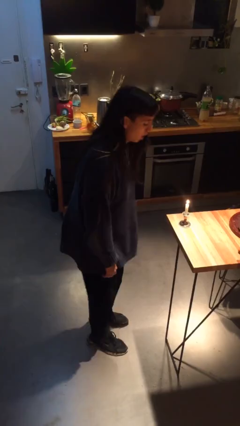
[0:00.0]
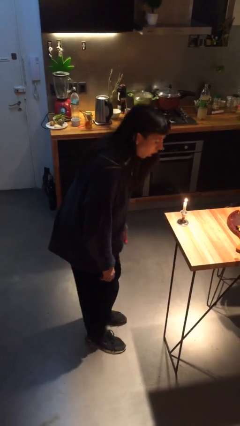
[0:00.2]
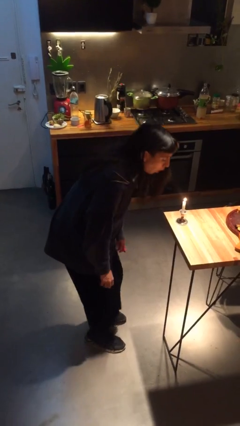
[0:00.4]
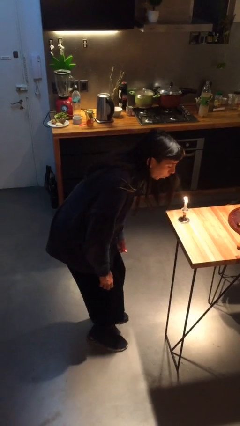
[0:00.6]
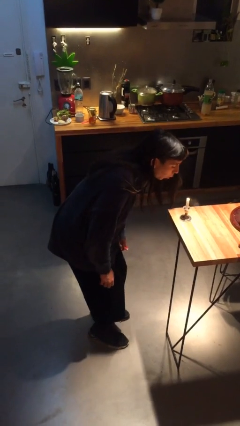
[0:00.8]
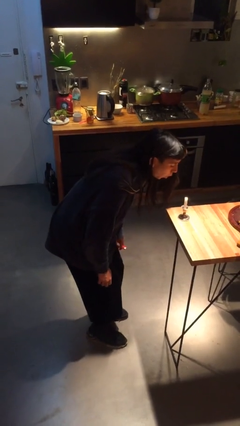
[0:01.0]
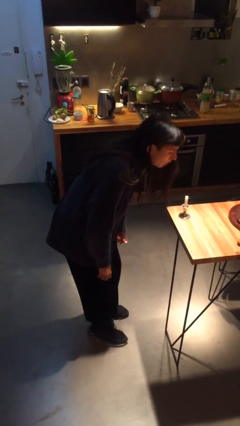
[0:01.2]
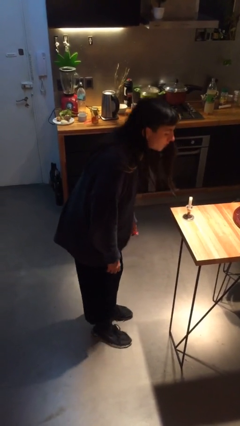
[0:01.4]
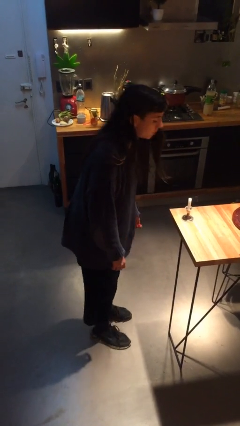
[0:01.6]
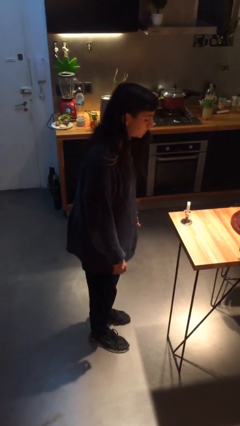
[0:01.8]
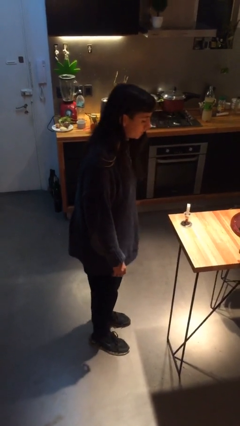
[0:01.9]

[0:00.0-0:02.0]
person extinguishes candle

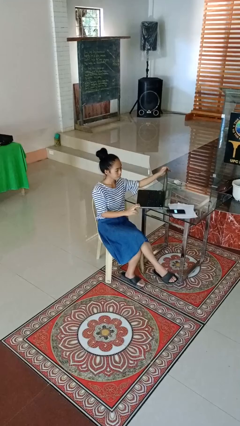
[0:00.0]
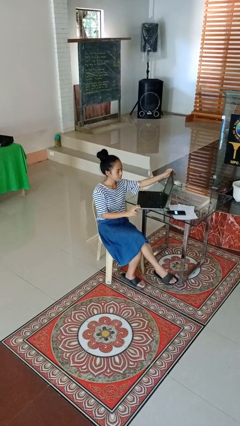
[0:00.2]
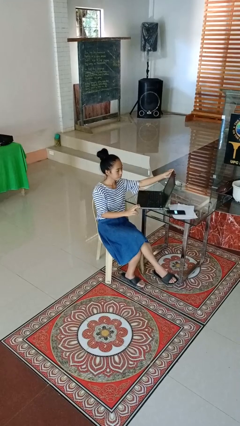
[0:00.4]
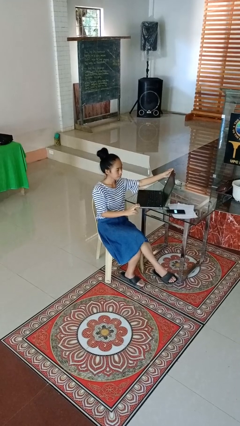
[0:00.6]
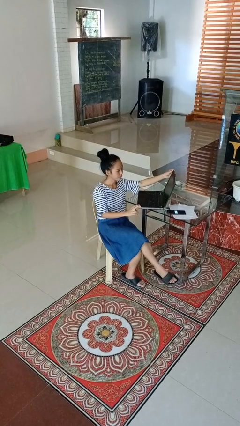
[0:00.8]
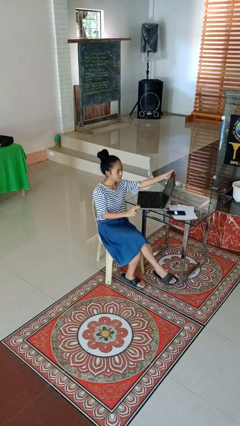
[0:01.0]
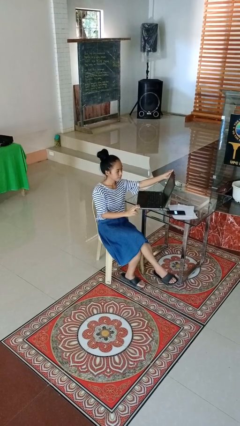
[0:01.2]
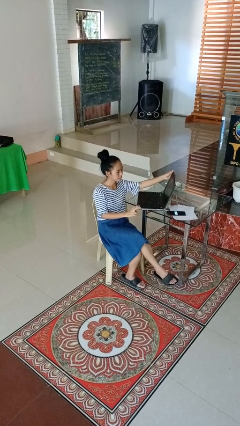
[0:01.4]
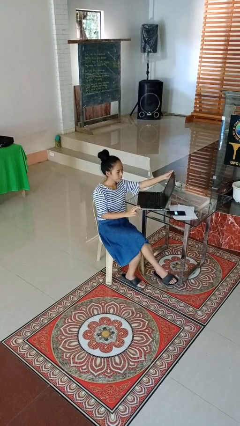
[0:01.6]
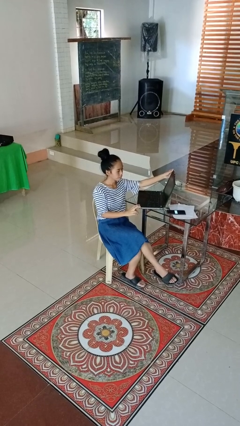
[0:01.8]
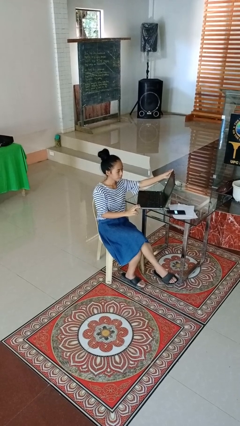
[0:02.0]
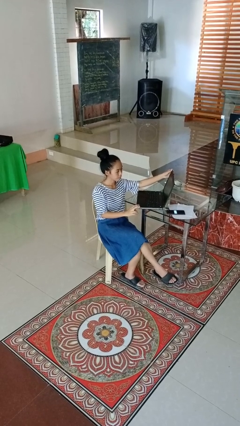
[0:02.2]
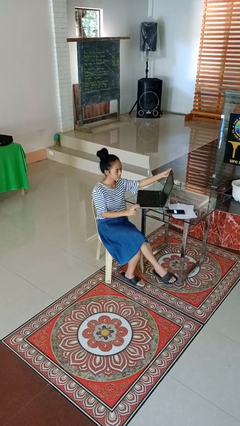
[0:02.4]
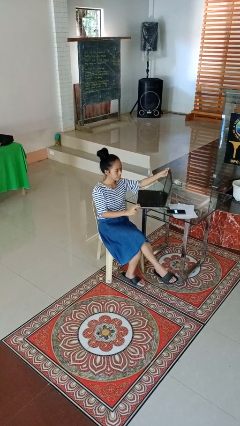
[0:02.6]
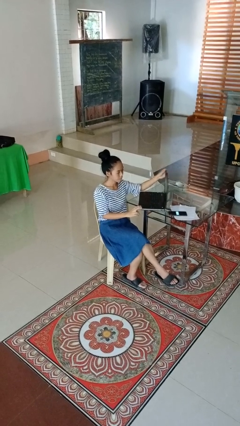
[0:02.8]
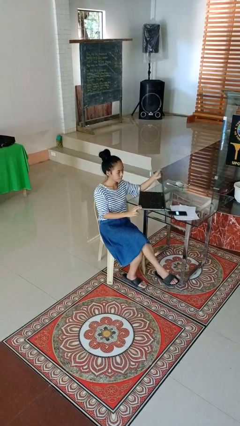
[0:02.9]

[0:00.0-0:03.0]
person opens laptop

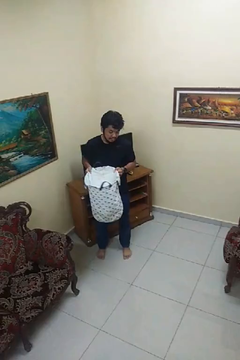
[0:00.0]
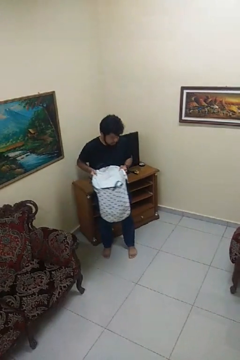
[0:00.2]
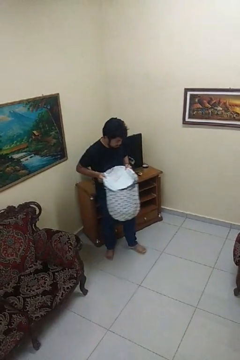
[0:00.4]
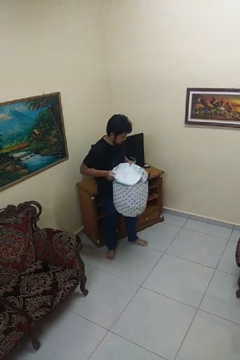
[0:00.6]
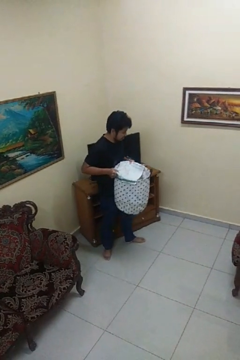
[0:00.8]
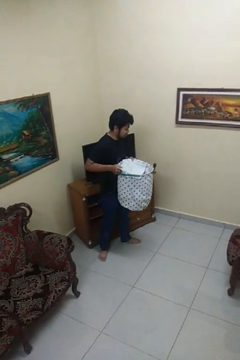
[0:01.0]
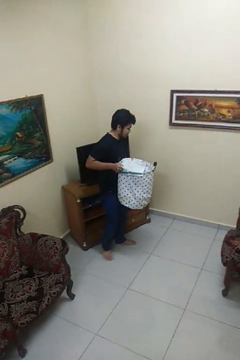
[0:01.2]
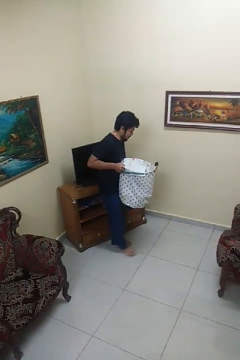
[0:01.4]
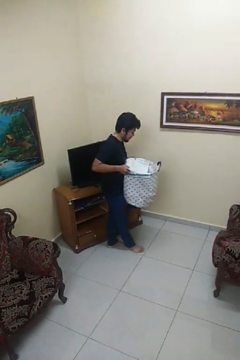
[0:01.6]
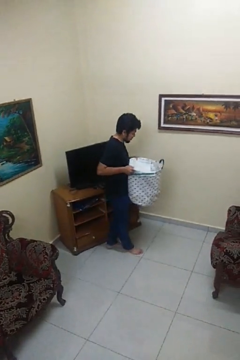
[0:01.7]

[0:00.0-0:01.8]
person carries laundry basket

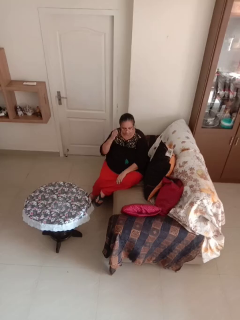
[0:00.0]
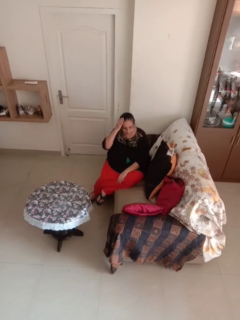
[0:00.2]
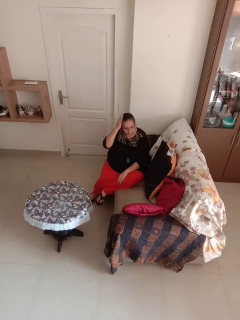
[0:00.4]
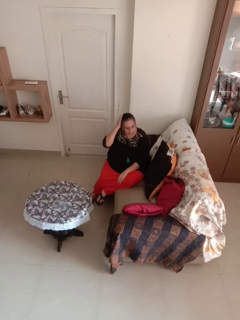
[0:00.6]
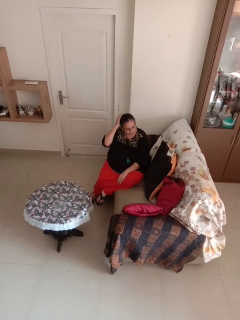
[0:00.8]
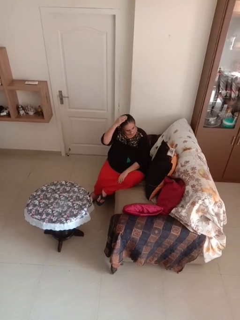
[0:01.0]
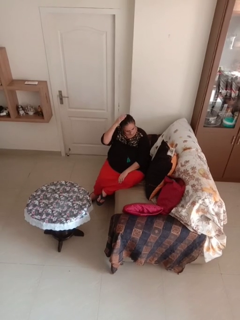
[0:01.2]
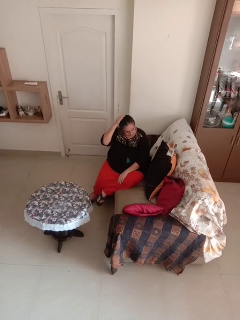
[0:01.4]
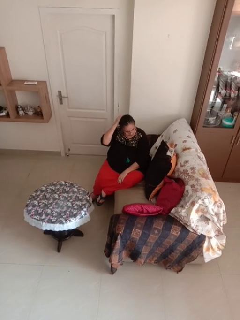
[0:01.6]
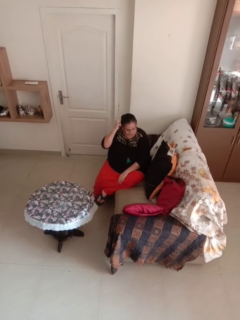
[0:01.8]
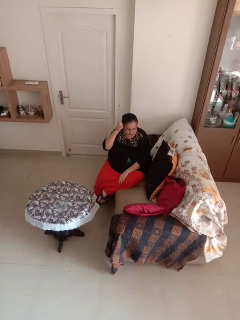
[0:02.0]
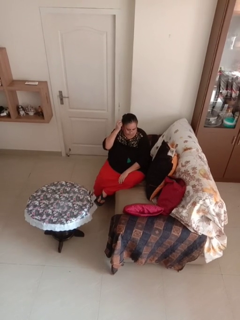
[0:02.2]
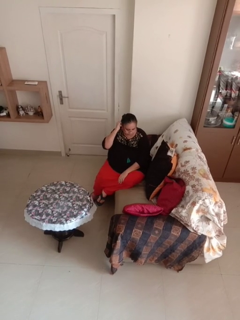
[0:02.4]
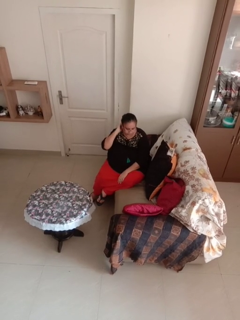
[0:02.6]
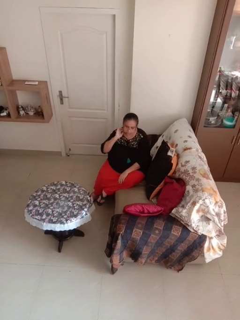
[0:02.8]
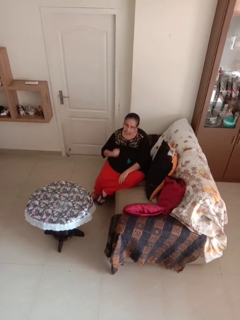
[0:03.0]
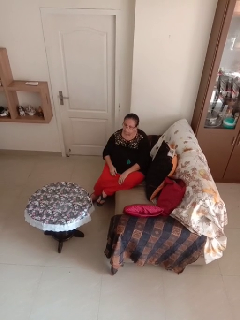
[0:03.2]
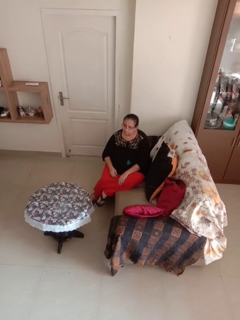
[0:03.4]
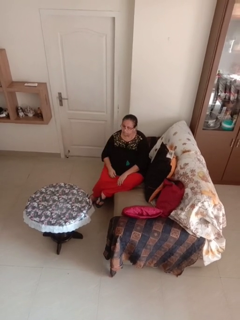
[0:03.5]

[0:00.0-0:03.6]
person strokes hair

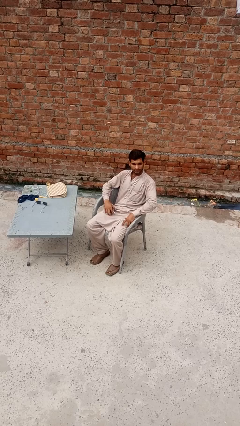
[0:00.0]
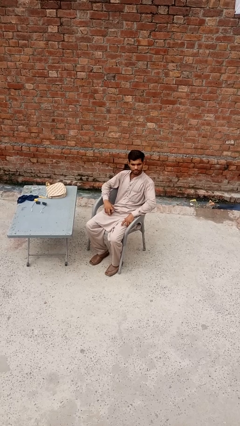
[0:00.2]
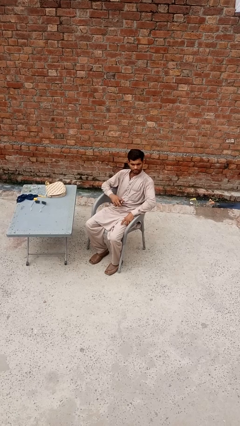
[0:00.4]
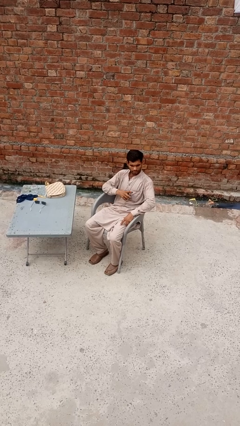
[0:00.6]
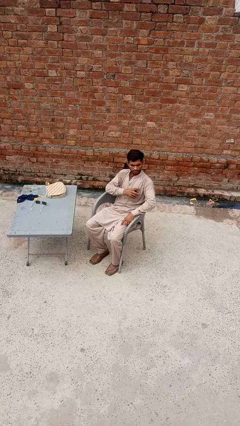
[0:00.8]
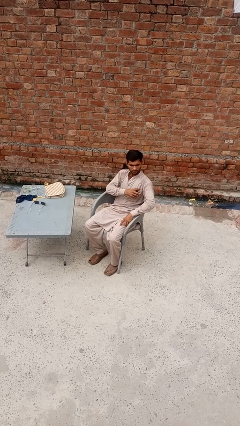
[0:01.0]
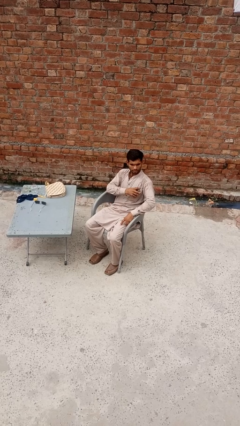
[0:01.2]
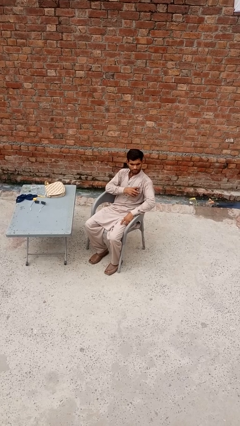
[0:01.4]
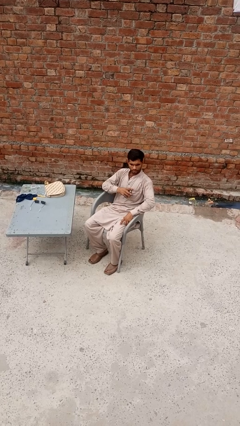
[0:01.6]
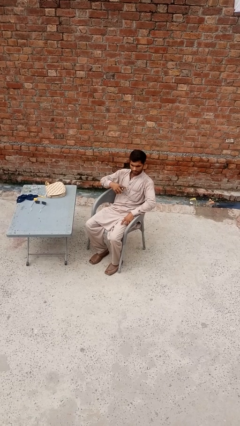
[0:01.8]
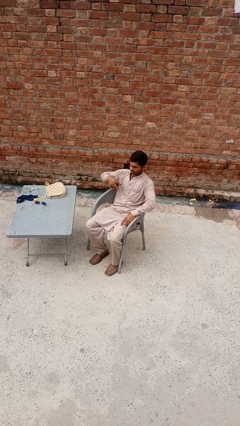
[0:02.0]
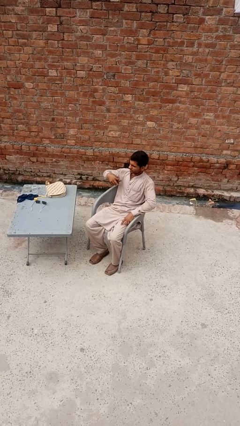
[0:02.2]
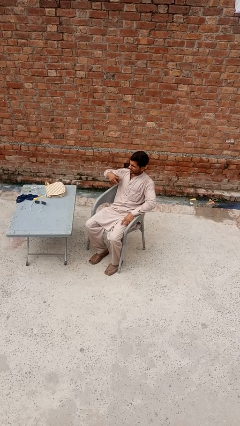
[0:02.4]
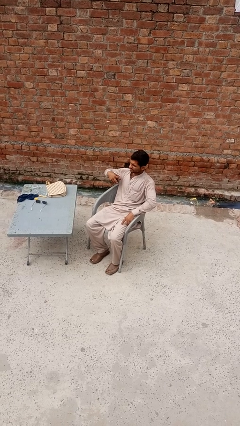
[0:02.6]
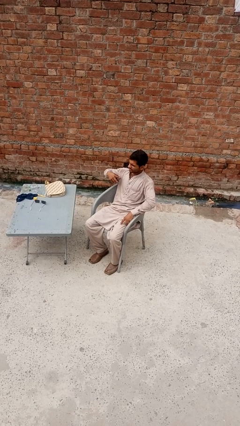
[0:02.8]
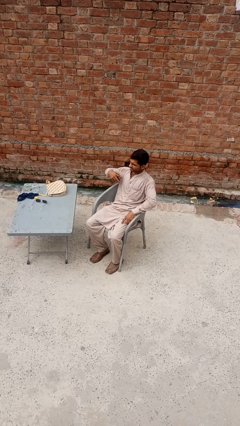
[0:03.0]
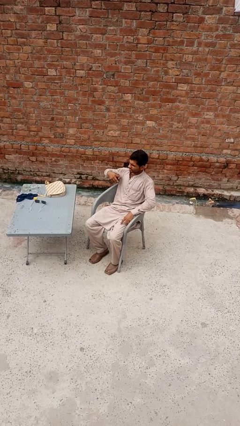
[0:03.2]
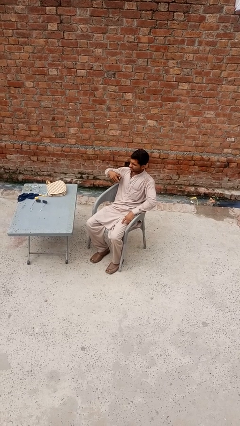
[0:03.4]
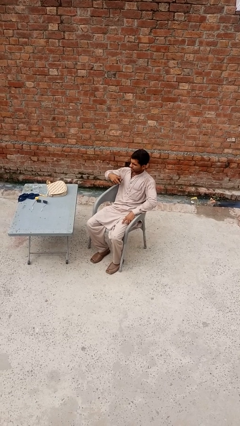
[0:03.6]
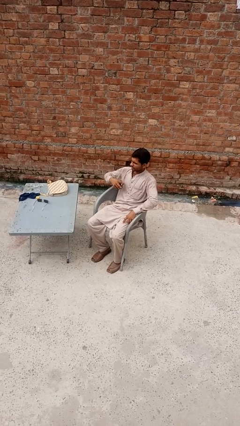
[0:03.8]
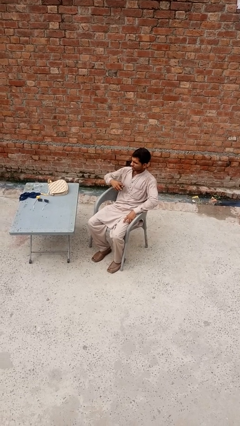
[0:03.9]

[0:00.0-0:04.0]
person applies deodorant

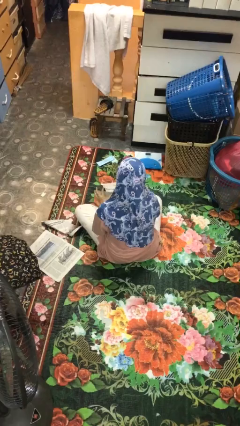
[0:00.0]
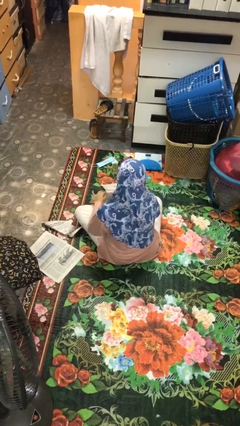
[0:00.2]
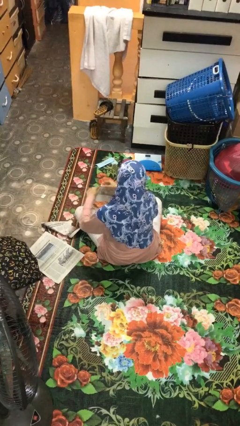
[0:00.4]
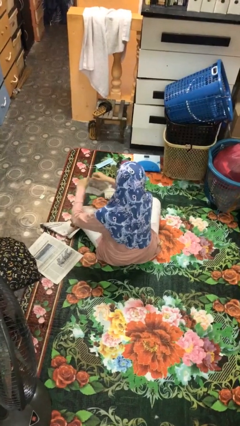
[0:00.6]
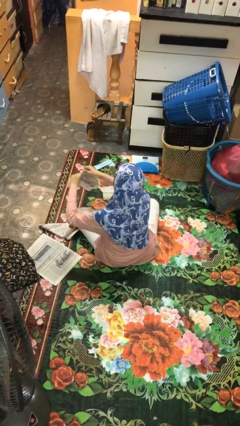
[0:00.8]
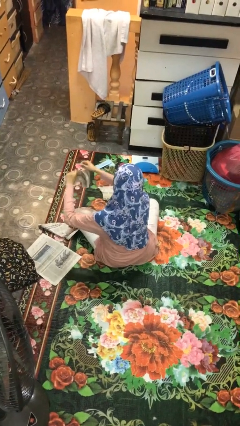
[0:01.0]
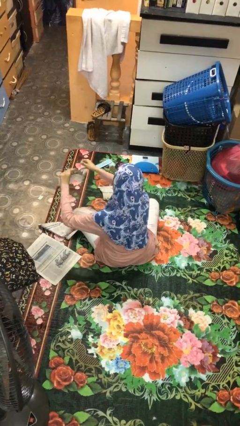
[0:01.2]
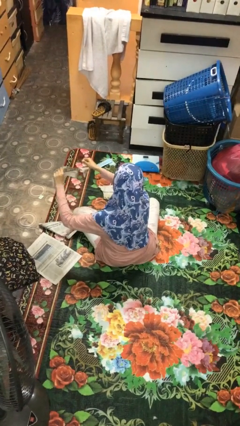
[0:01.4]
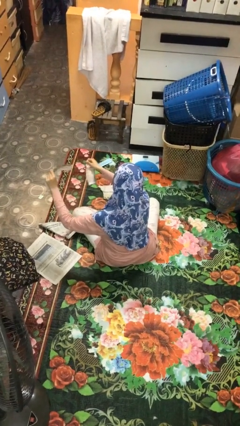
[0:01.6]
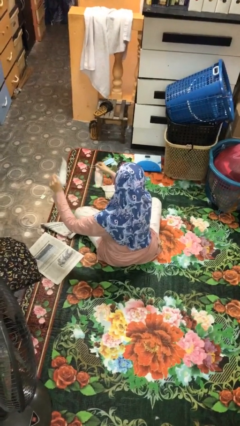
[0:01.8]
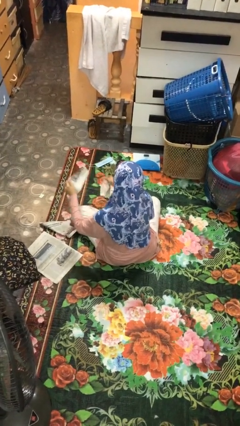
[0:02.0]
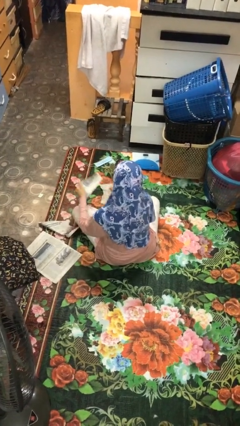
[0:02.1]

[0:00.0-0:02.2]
person tears paper

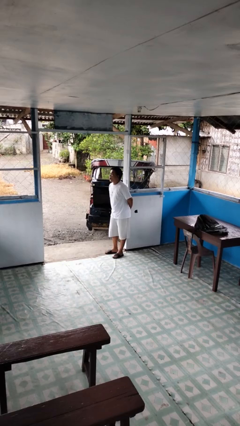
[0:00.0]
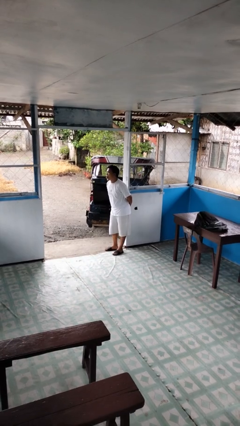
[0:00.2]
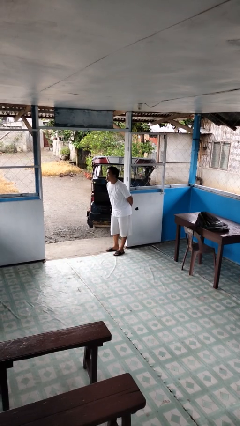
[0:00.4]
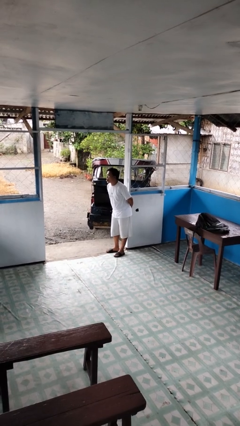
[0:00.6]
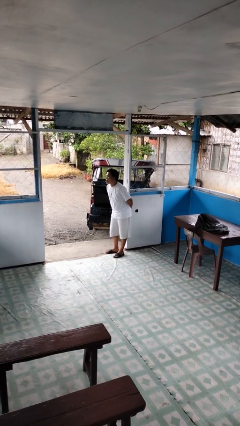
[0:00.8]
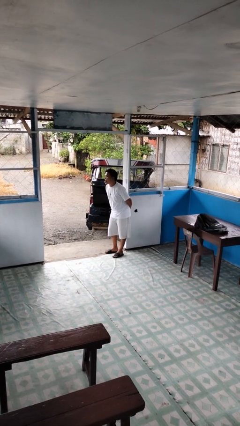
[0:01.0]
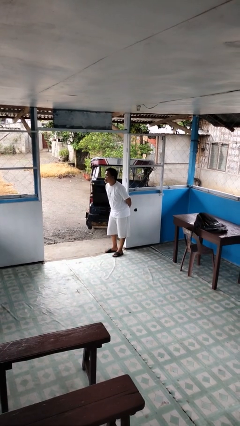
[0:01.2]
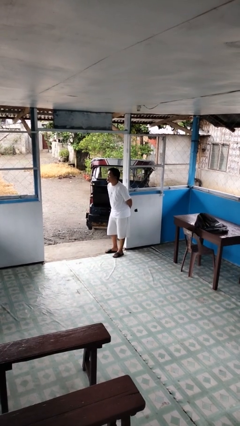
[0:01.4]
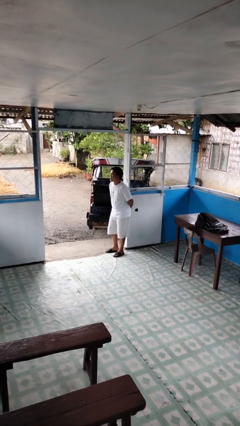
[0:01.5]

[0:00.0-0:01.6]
person sticks out tongue
